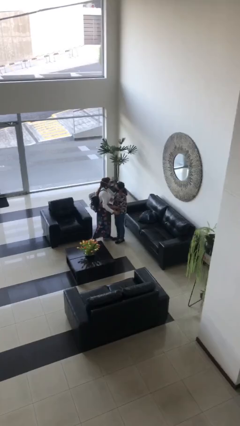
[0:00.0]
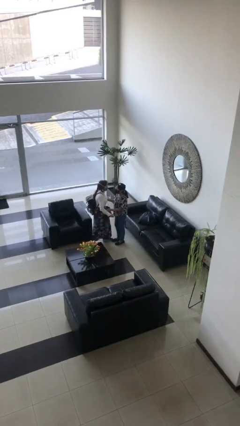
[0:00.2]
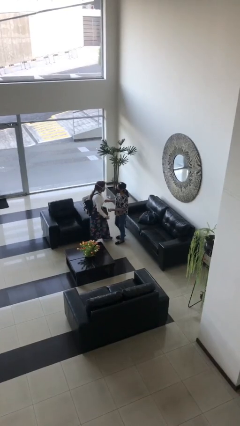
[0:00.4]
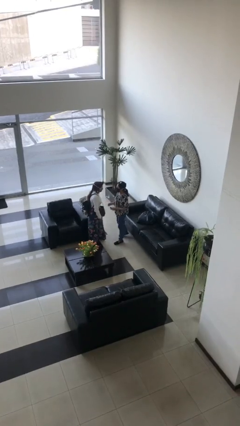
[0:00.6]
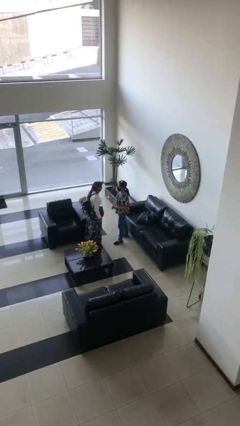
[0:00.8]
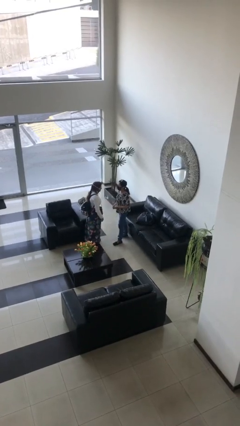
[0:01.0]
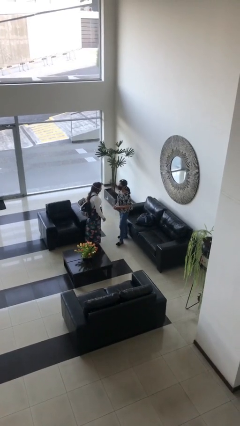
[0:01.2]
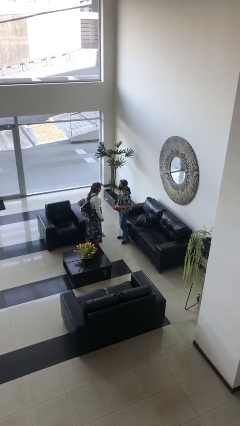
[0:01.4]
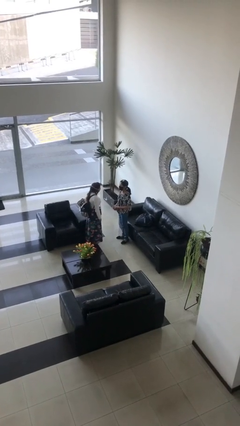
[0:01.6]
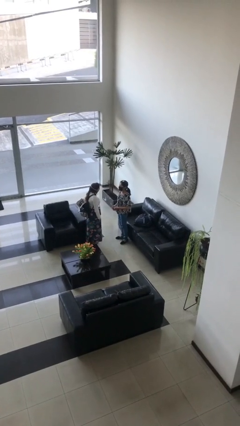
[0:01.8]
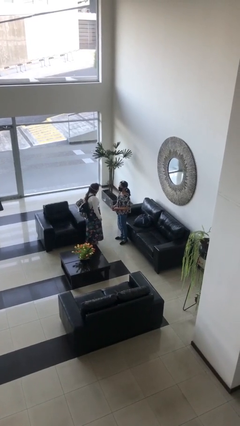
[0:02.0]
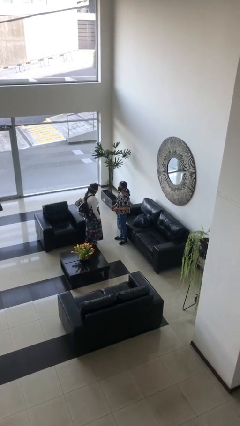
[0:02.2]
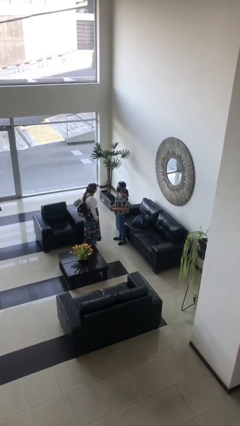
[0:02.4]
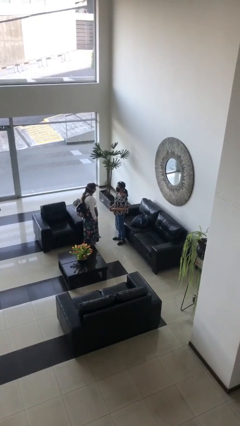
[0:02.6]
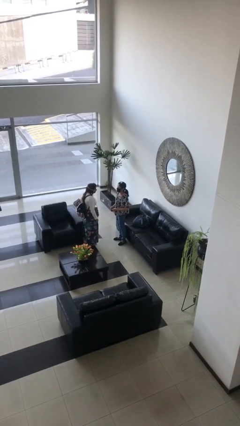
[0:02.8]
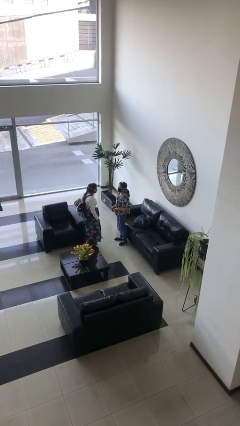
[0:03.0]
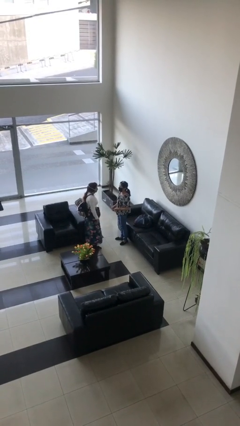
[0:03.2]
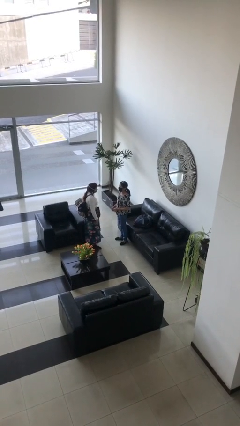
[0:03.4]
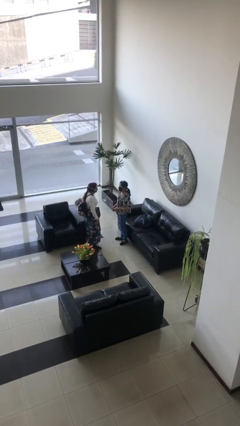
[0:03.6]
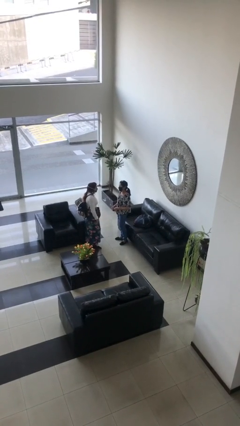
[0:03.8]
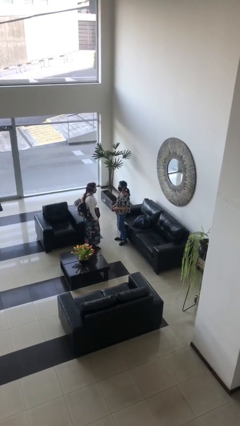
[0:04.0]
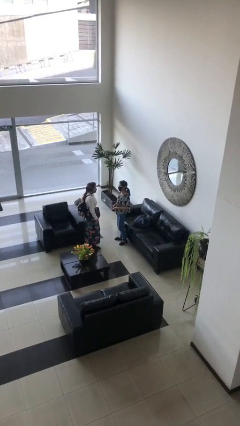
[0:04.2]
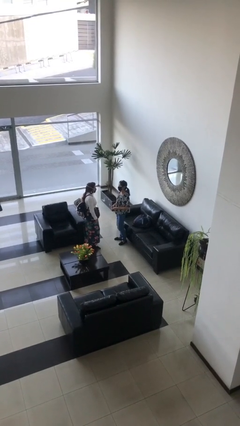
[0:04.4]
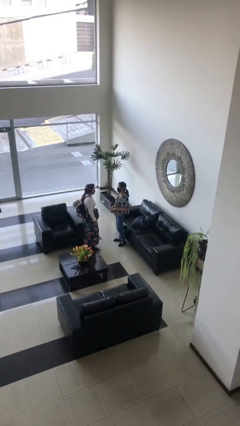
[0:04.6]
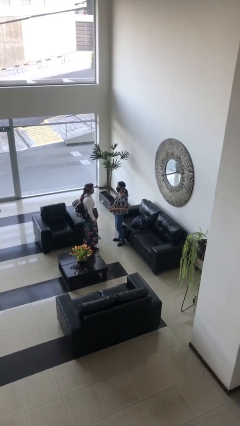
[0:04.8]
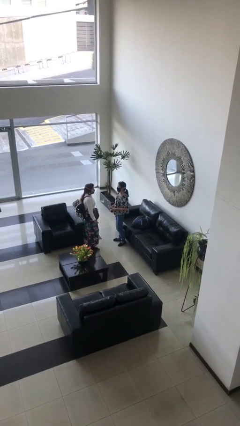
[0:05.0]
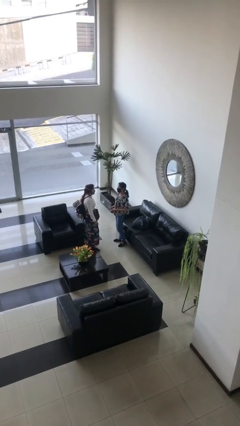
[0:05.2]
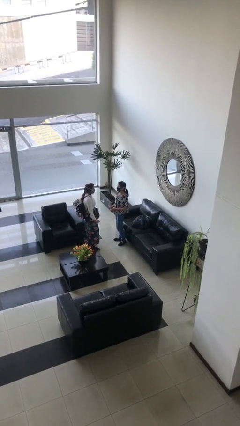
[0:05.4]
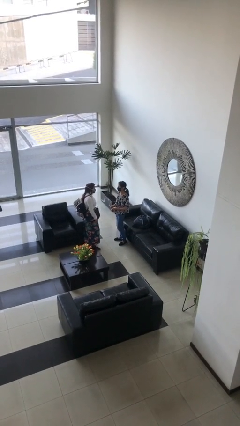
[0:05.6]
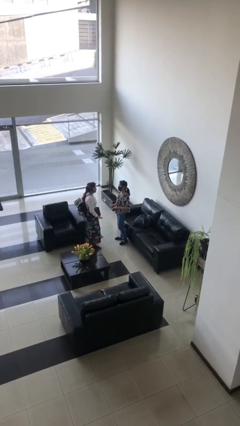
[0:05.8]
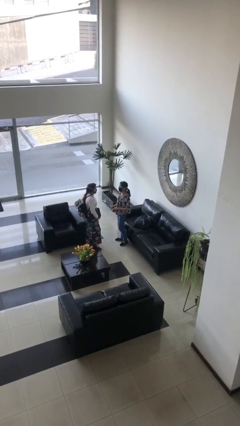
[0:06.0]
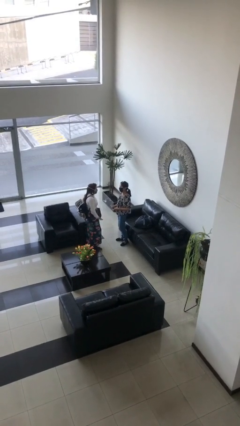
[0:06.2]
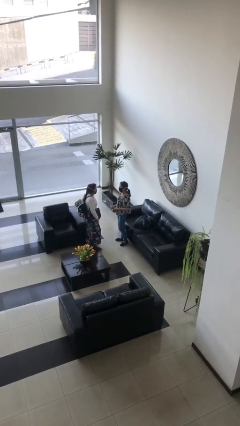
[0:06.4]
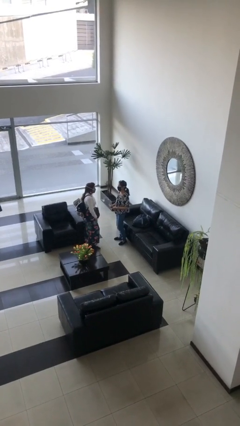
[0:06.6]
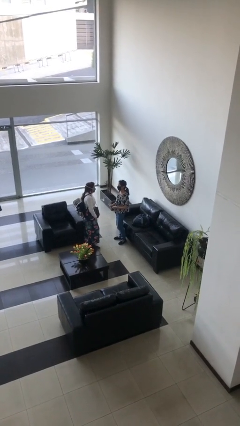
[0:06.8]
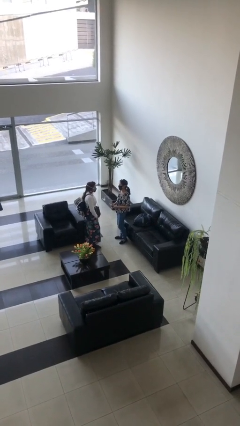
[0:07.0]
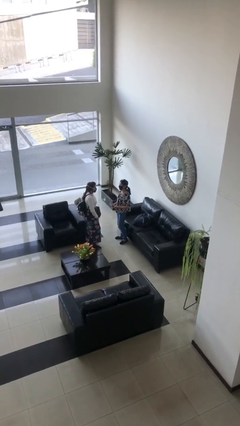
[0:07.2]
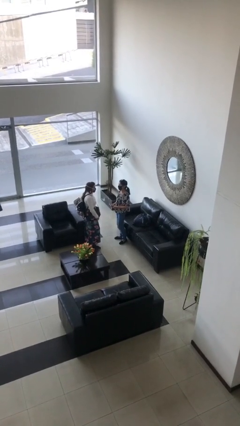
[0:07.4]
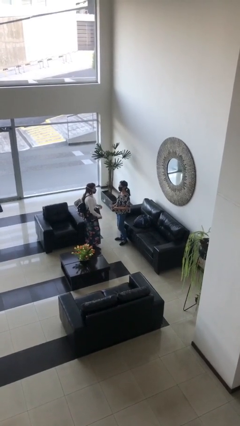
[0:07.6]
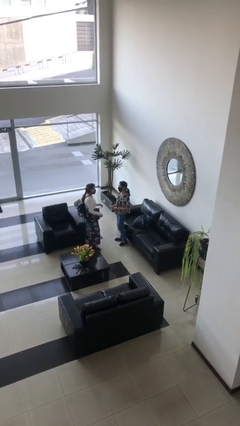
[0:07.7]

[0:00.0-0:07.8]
person talks to person

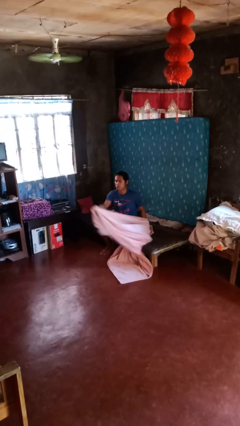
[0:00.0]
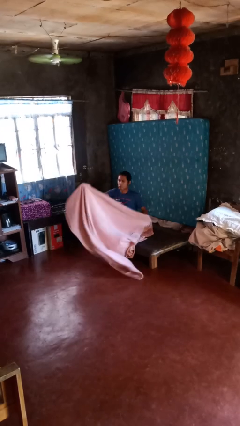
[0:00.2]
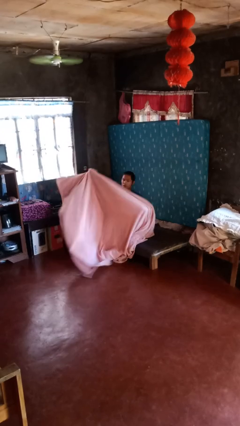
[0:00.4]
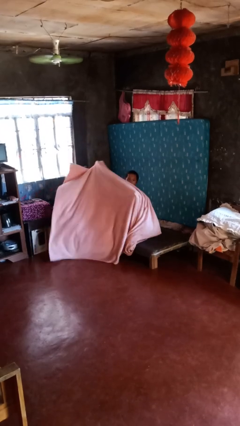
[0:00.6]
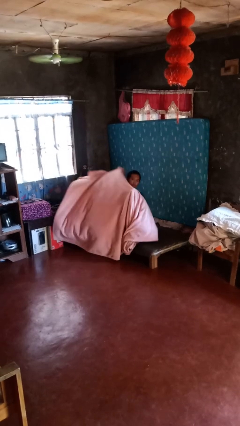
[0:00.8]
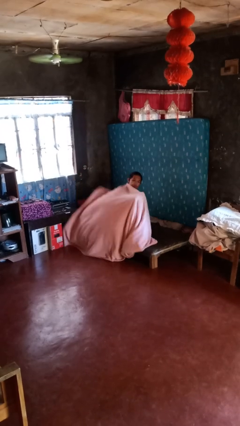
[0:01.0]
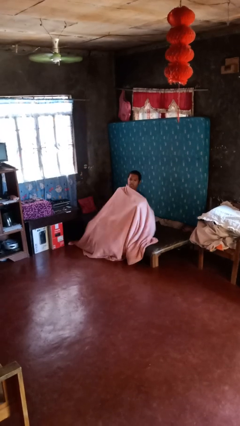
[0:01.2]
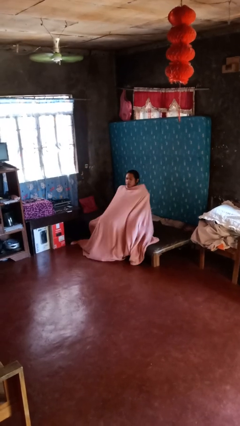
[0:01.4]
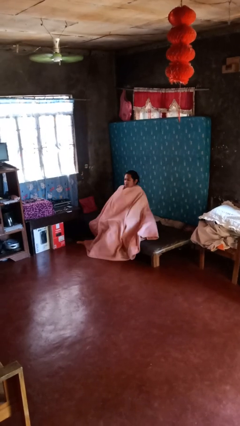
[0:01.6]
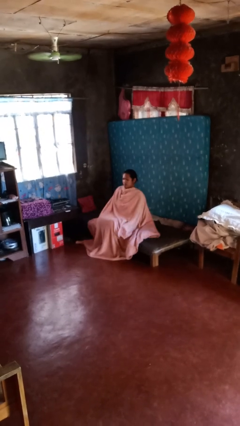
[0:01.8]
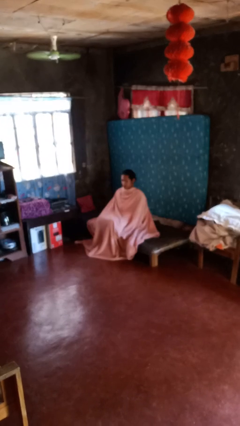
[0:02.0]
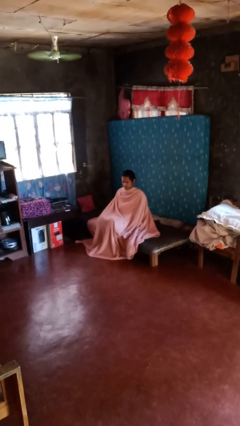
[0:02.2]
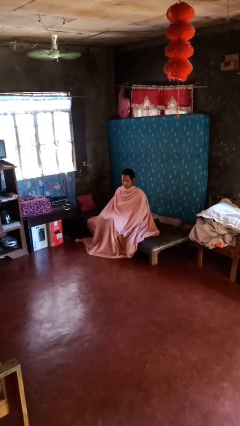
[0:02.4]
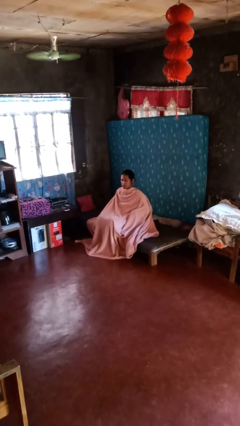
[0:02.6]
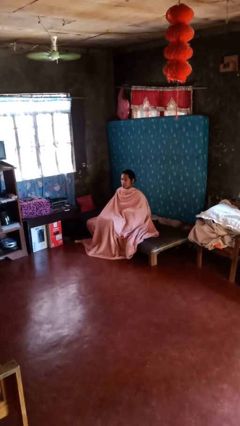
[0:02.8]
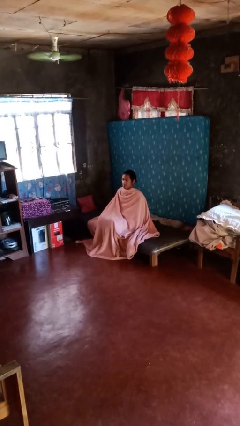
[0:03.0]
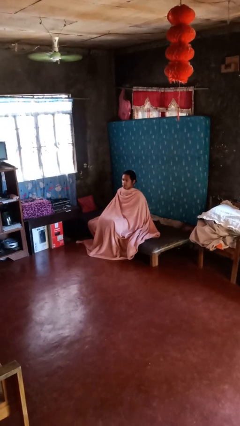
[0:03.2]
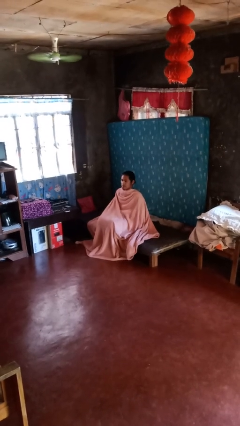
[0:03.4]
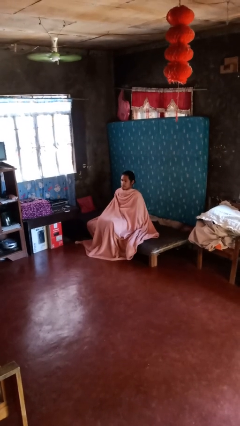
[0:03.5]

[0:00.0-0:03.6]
person covers with blanket

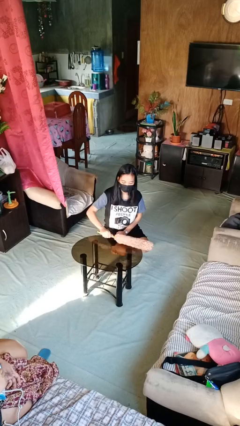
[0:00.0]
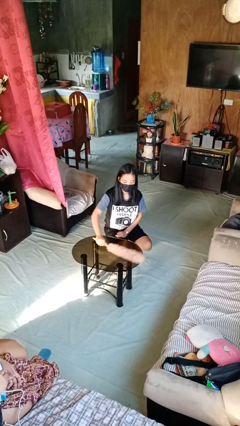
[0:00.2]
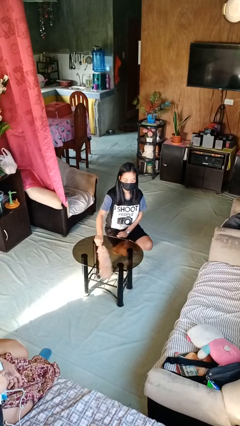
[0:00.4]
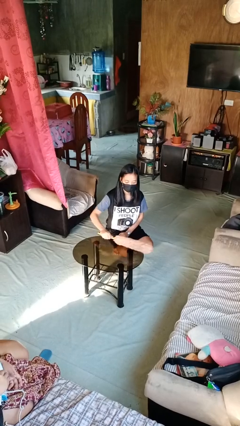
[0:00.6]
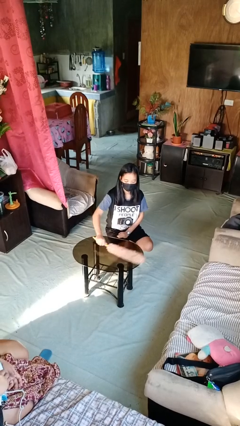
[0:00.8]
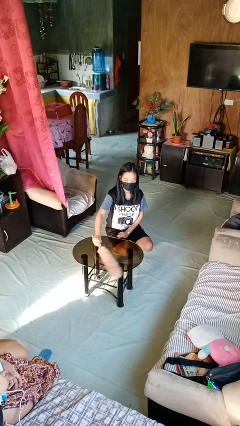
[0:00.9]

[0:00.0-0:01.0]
person dusts furniture

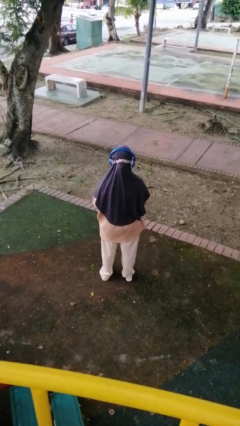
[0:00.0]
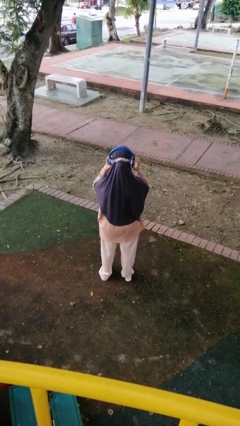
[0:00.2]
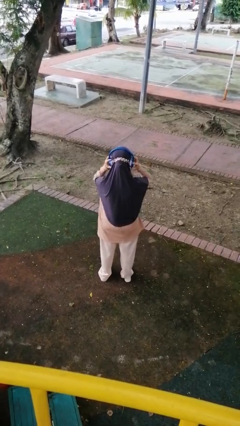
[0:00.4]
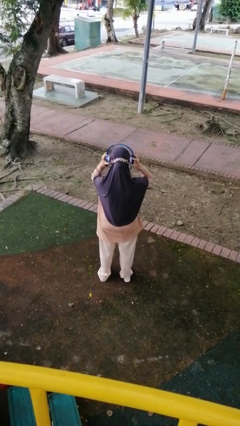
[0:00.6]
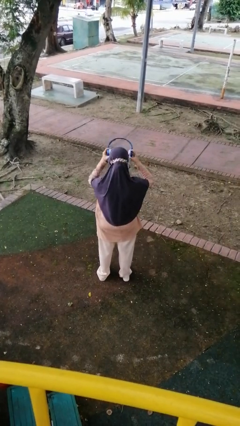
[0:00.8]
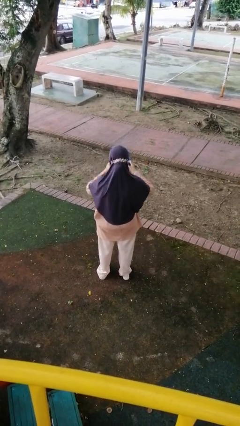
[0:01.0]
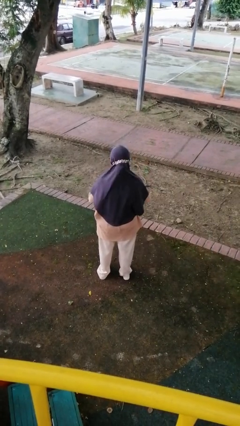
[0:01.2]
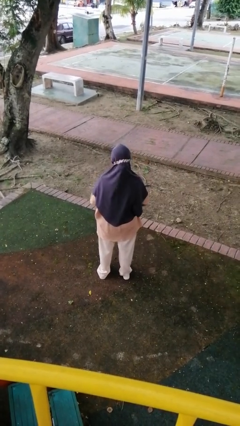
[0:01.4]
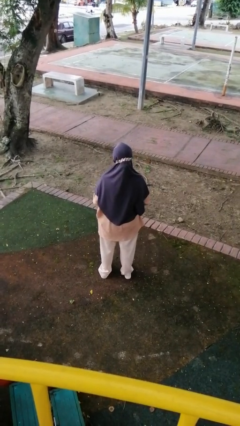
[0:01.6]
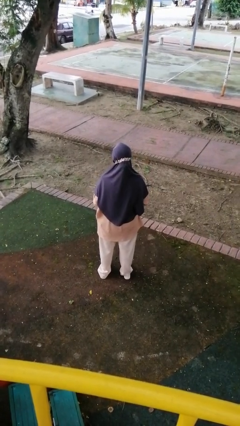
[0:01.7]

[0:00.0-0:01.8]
person takes off headphones

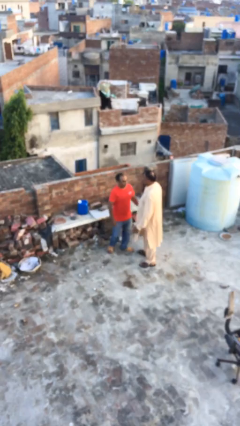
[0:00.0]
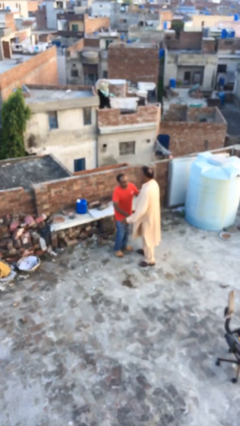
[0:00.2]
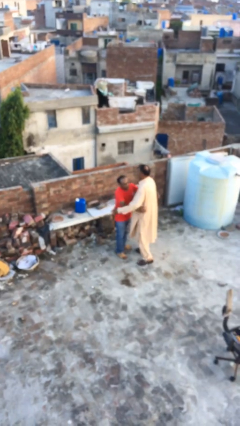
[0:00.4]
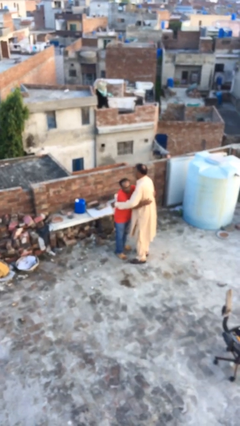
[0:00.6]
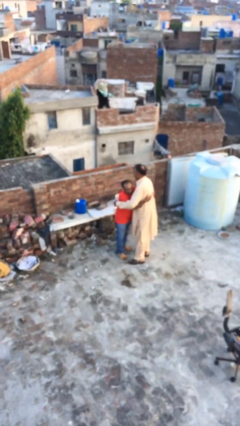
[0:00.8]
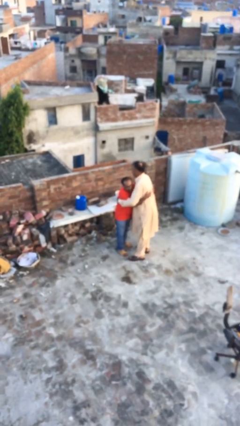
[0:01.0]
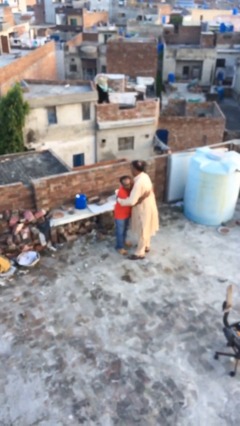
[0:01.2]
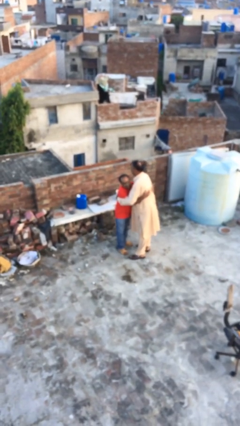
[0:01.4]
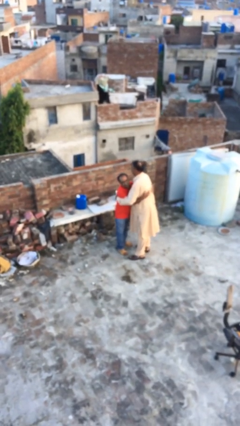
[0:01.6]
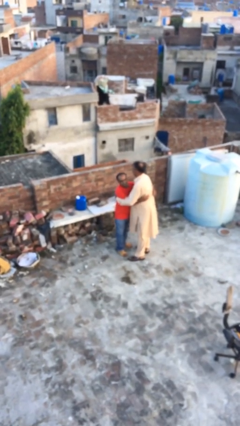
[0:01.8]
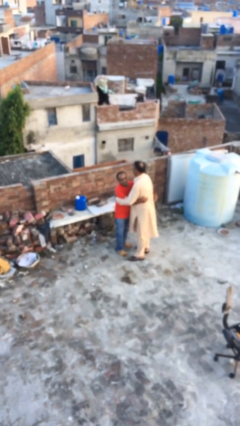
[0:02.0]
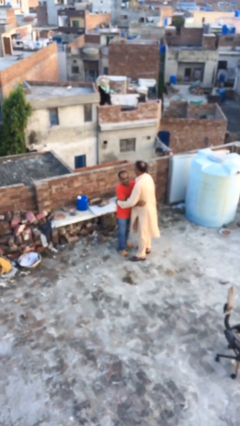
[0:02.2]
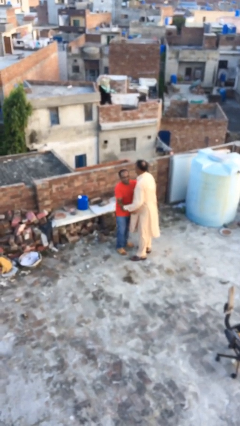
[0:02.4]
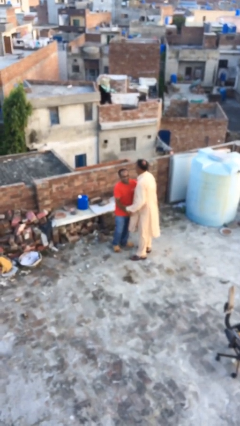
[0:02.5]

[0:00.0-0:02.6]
person embraces person

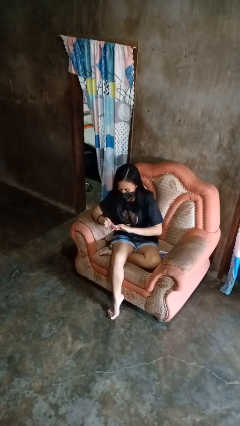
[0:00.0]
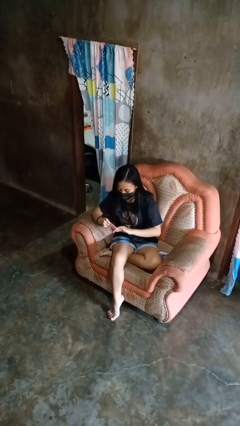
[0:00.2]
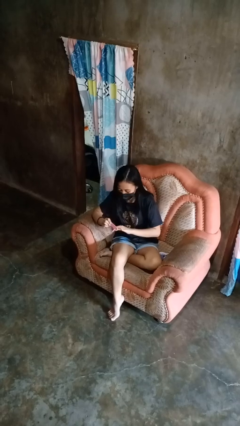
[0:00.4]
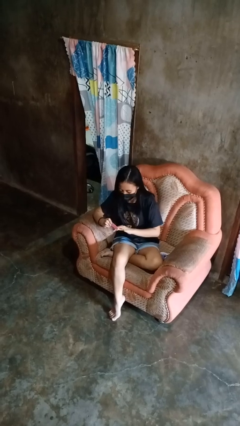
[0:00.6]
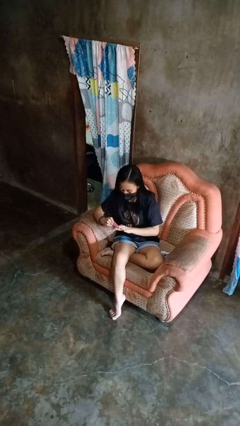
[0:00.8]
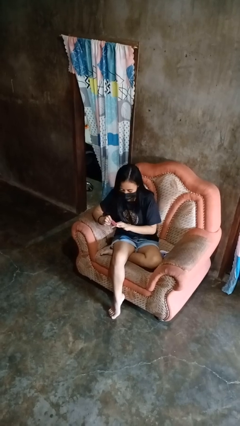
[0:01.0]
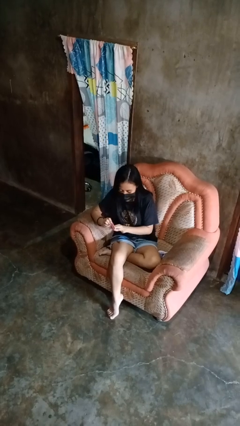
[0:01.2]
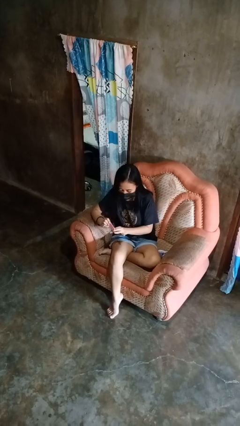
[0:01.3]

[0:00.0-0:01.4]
person files fingernails
